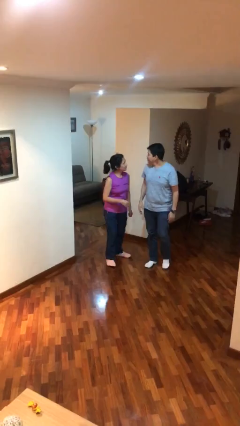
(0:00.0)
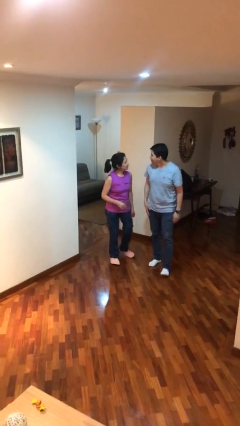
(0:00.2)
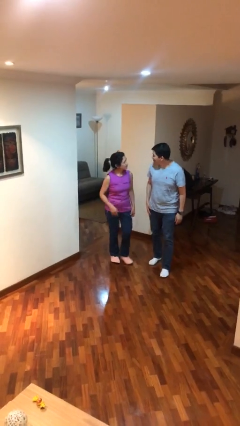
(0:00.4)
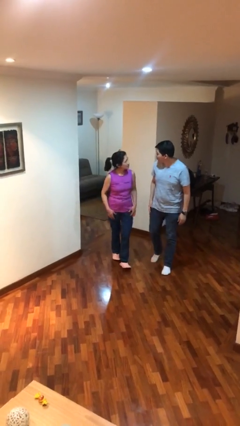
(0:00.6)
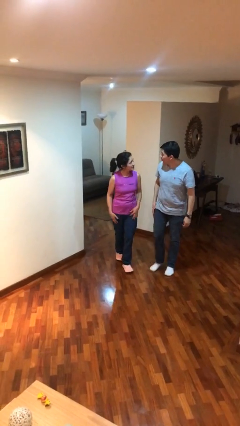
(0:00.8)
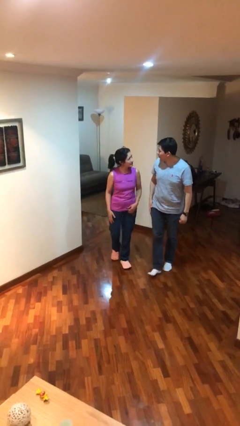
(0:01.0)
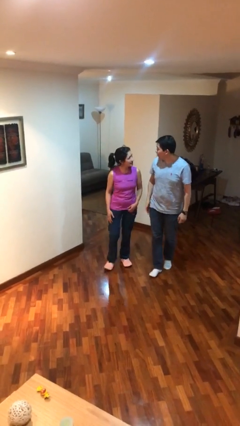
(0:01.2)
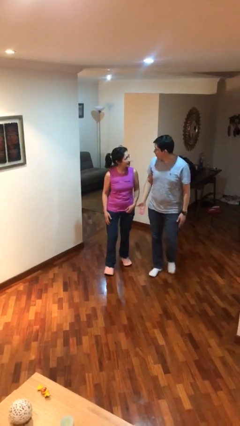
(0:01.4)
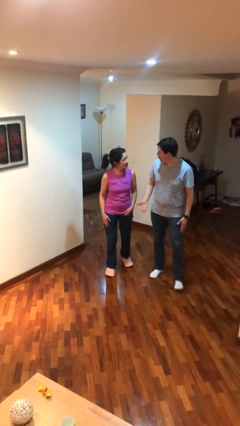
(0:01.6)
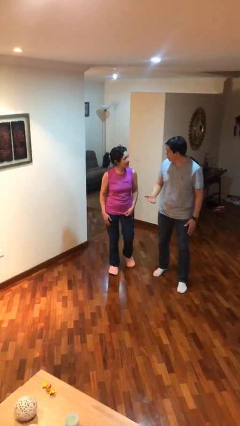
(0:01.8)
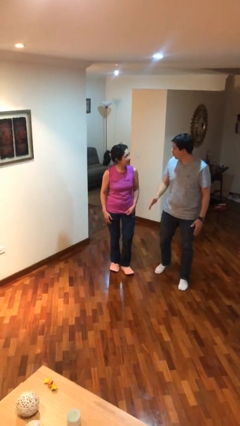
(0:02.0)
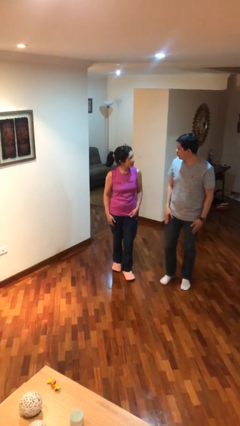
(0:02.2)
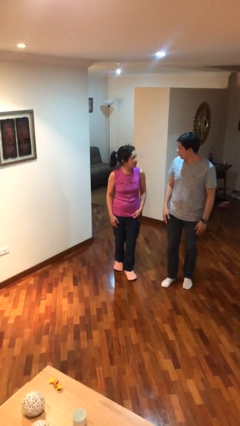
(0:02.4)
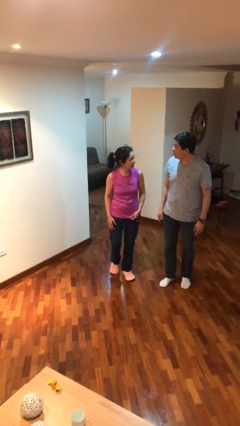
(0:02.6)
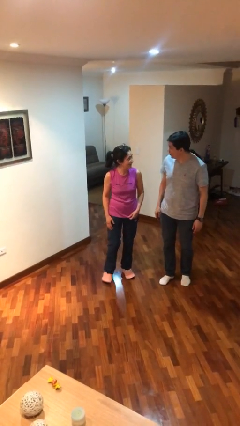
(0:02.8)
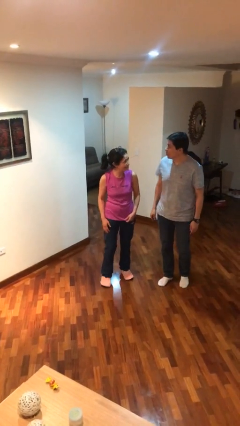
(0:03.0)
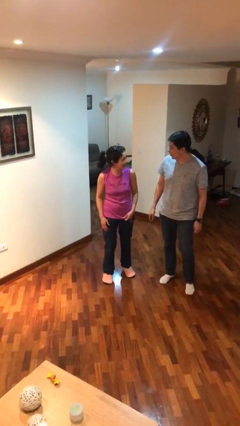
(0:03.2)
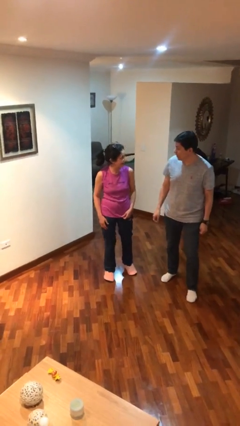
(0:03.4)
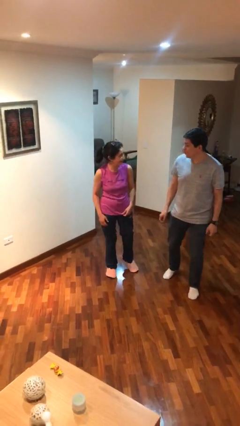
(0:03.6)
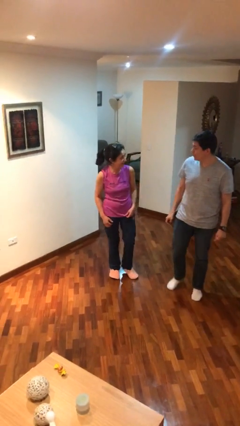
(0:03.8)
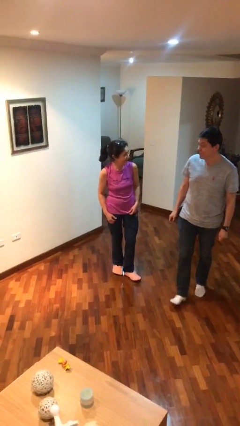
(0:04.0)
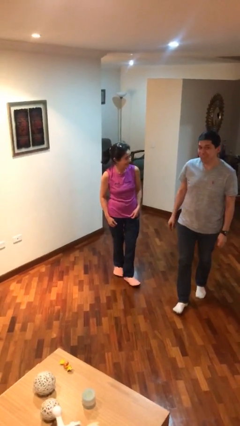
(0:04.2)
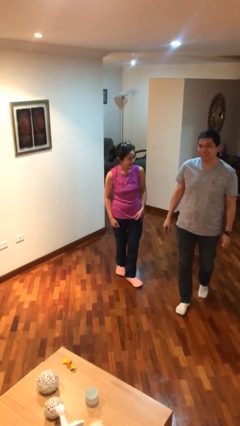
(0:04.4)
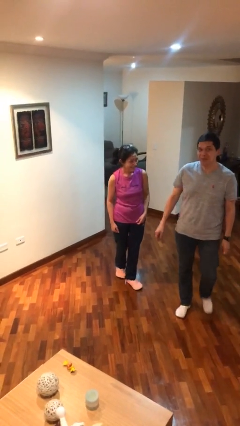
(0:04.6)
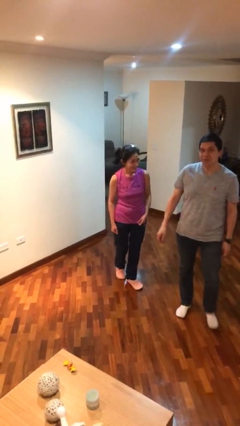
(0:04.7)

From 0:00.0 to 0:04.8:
person talks to person

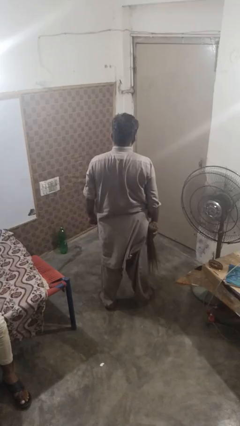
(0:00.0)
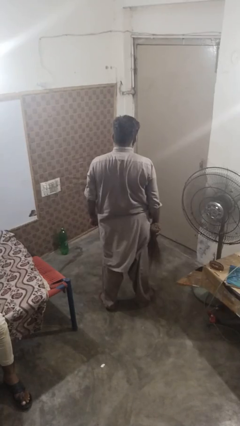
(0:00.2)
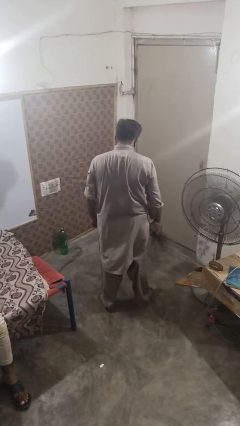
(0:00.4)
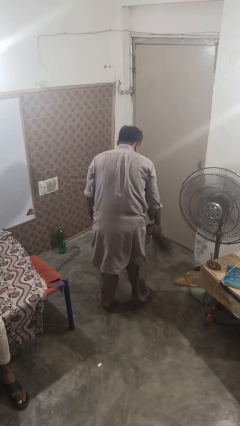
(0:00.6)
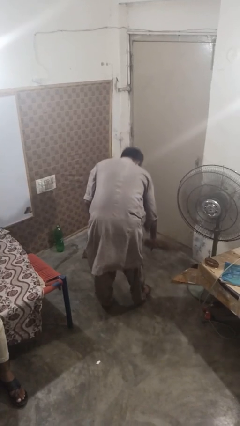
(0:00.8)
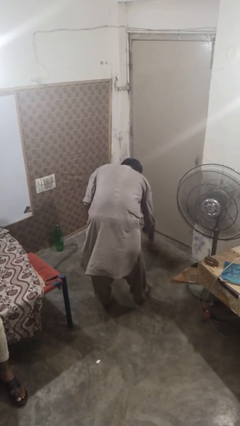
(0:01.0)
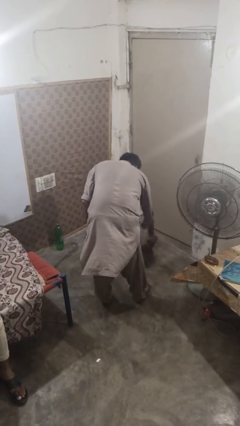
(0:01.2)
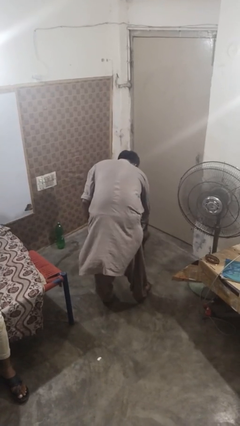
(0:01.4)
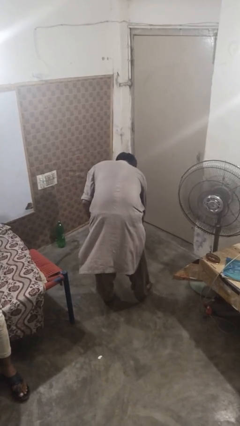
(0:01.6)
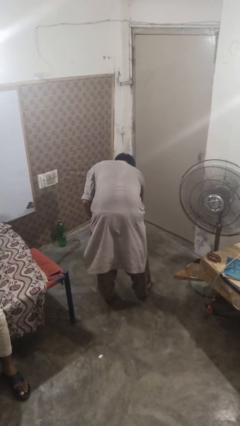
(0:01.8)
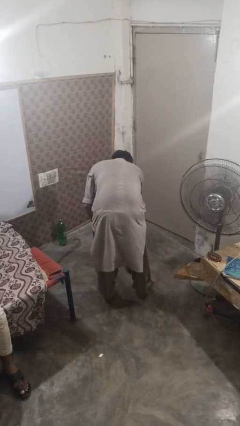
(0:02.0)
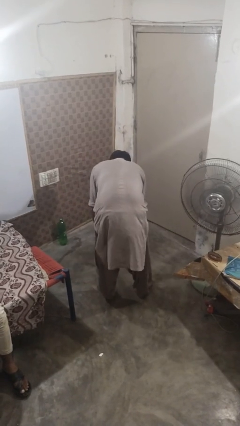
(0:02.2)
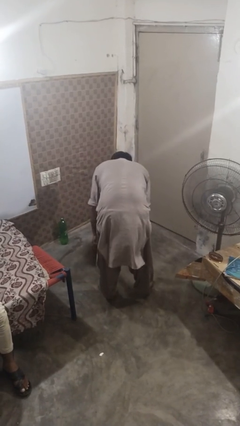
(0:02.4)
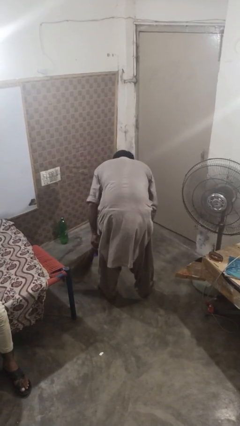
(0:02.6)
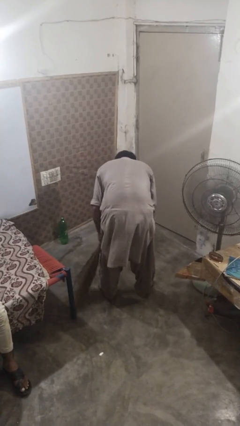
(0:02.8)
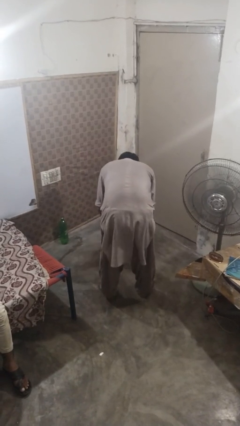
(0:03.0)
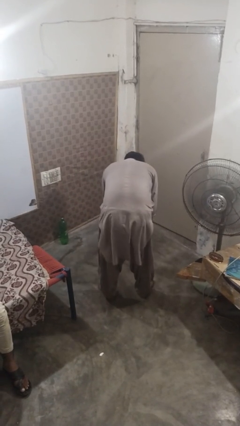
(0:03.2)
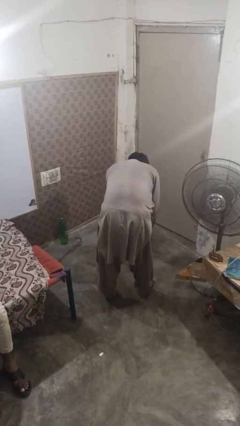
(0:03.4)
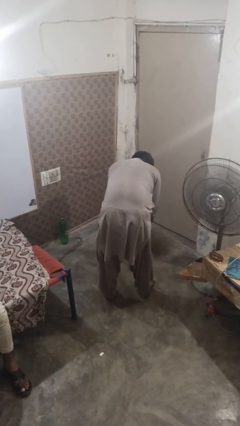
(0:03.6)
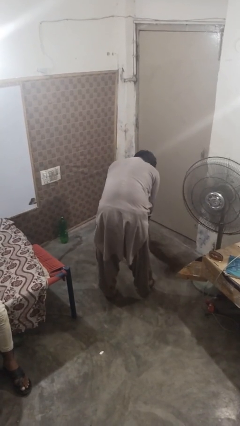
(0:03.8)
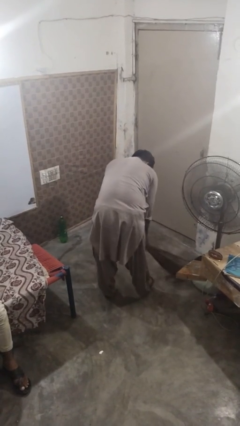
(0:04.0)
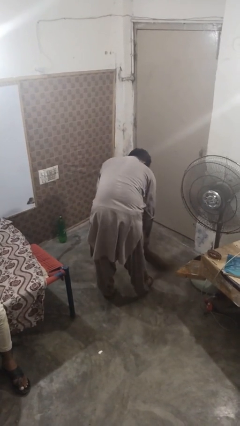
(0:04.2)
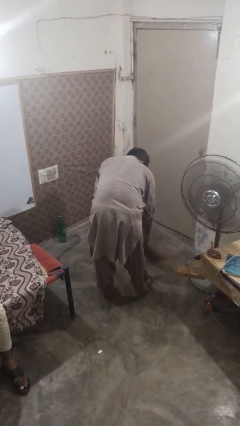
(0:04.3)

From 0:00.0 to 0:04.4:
person sweeps floor

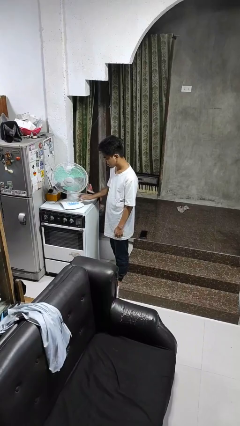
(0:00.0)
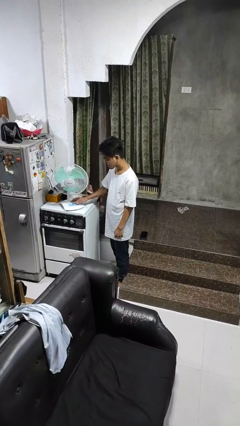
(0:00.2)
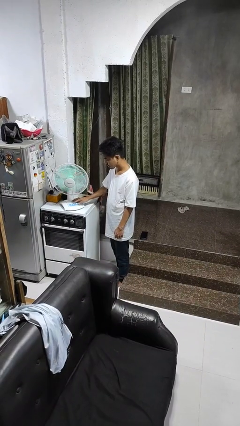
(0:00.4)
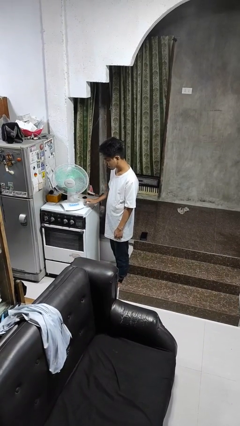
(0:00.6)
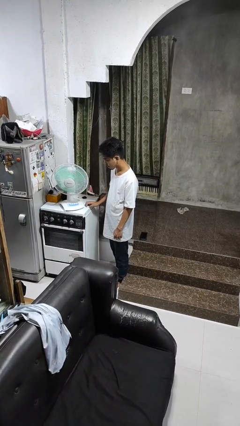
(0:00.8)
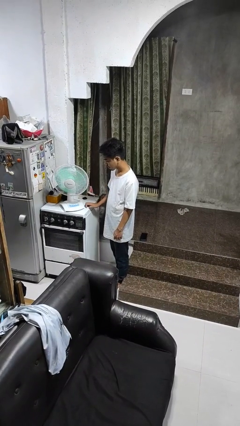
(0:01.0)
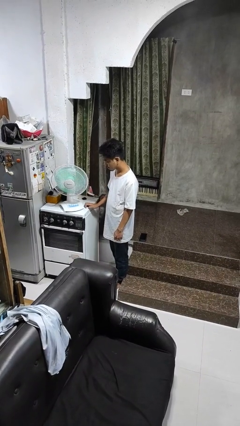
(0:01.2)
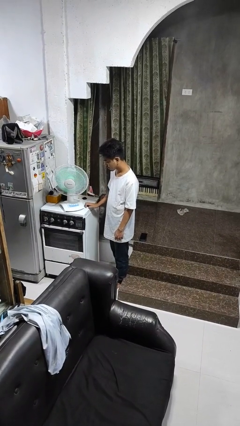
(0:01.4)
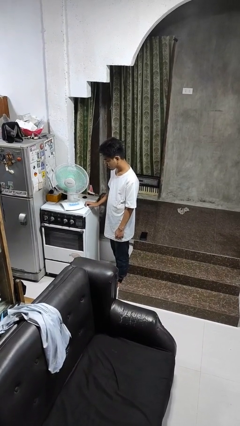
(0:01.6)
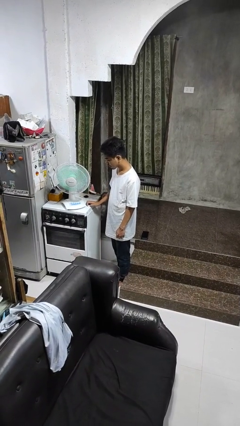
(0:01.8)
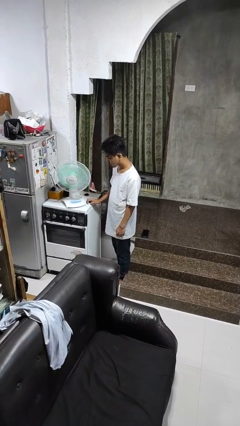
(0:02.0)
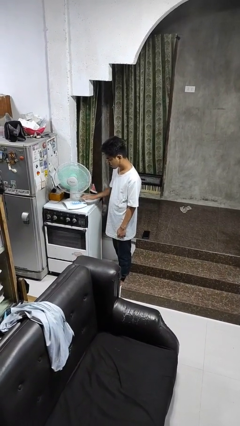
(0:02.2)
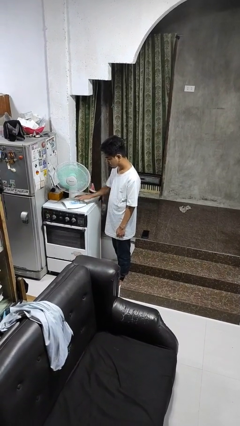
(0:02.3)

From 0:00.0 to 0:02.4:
person turns on fan

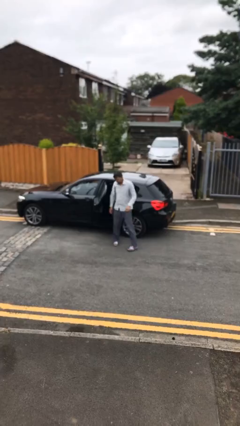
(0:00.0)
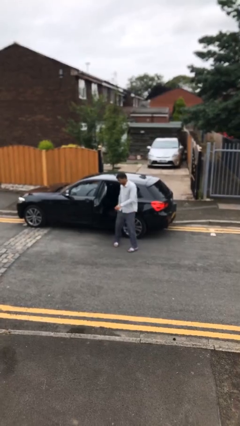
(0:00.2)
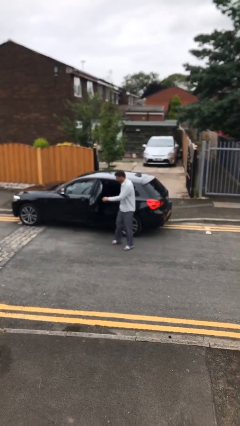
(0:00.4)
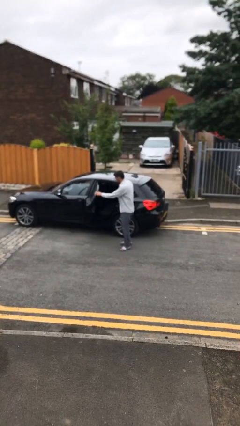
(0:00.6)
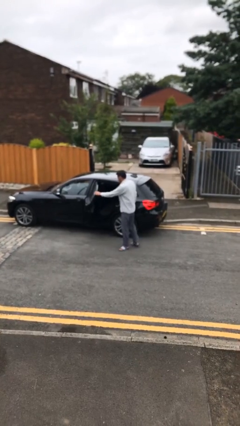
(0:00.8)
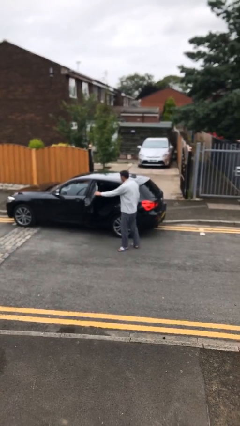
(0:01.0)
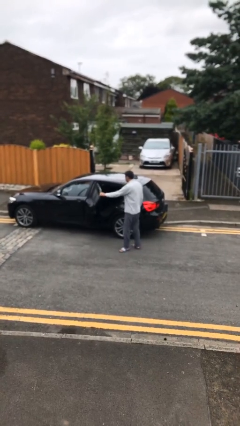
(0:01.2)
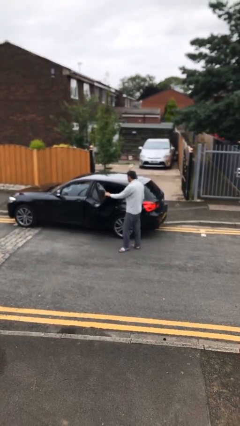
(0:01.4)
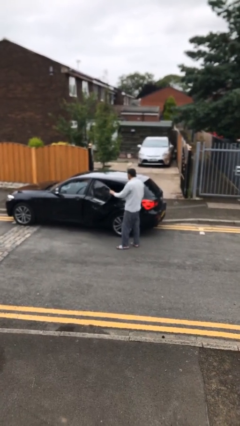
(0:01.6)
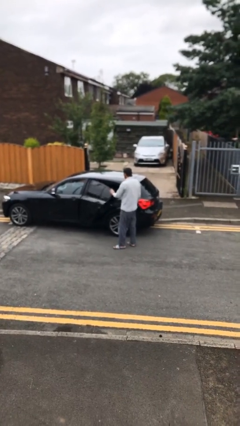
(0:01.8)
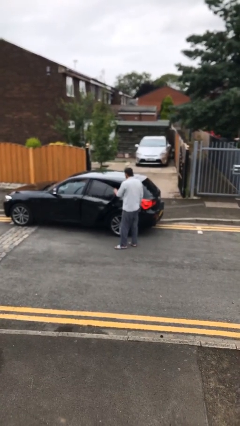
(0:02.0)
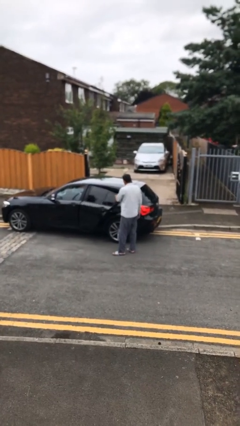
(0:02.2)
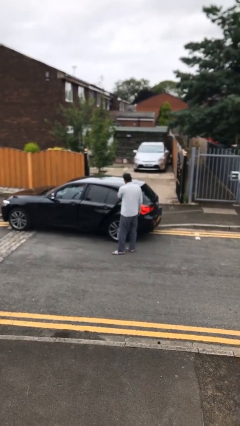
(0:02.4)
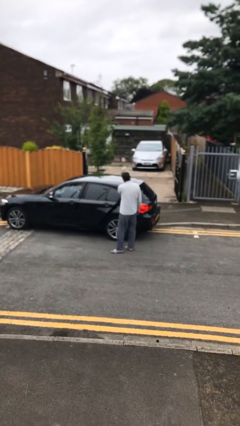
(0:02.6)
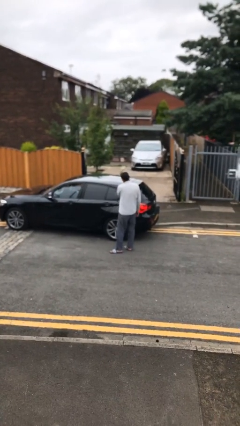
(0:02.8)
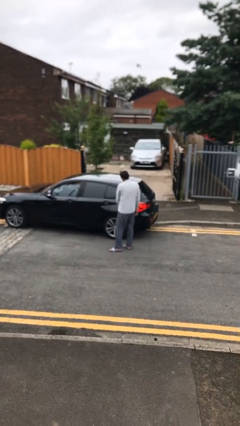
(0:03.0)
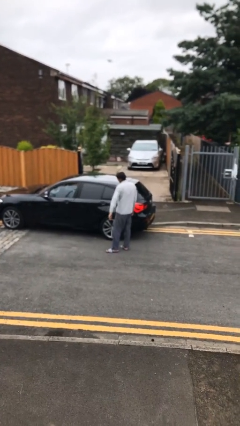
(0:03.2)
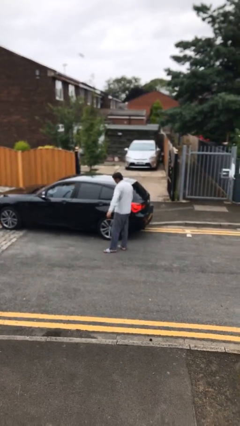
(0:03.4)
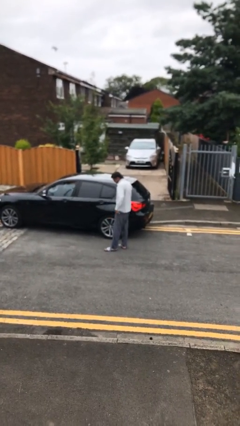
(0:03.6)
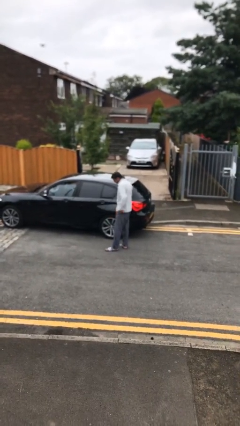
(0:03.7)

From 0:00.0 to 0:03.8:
person closes car door

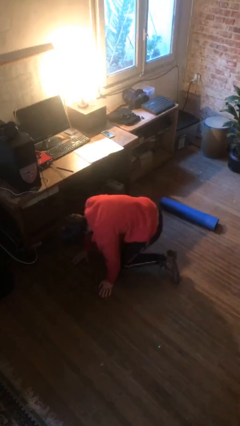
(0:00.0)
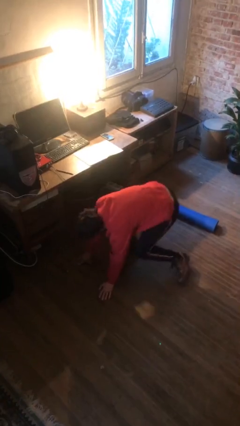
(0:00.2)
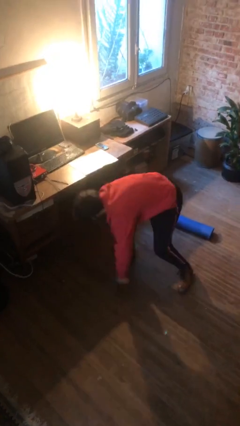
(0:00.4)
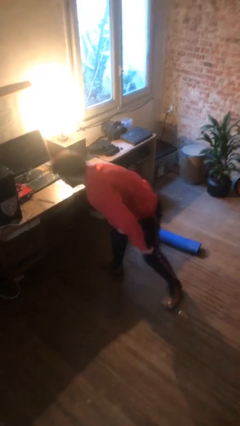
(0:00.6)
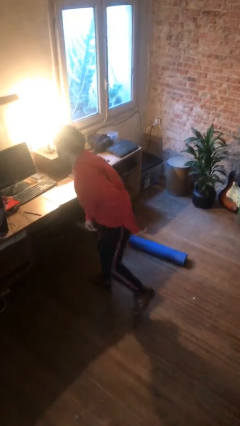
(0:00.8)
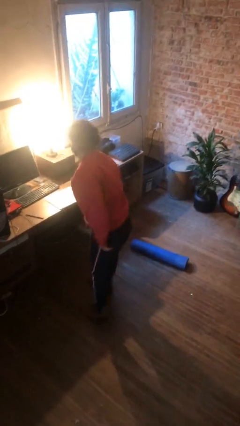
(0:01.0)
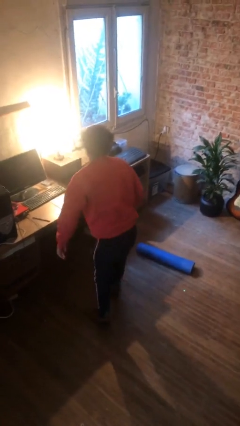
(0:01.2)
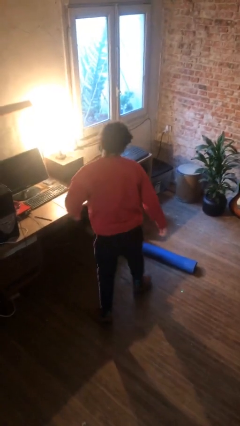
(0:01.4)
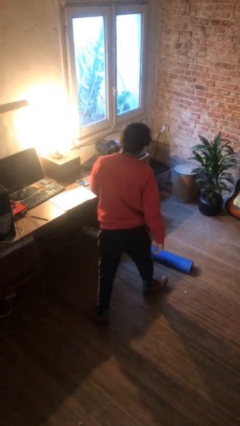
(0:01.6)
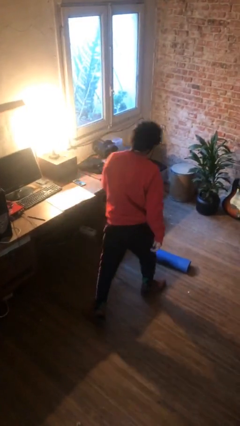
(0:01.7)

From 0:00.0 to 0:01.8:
person stands up from floor

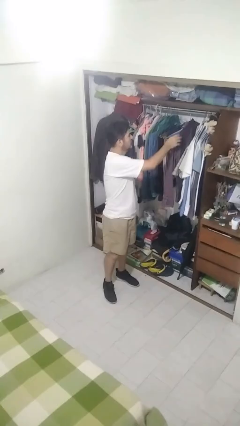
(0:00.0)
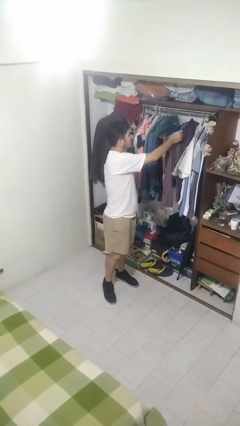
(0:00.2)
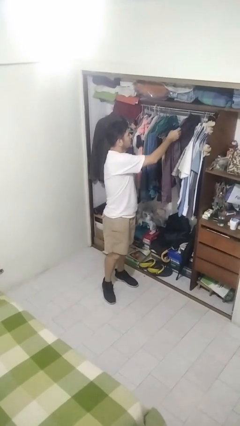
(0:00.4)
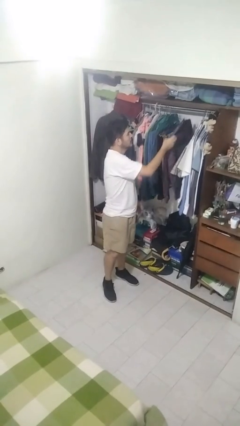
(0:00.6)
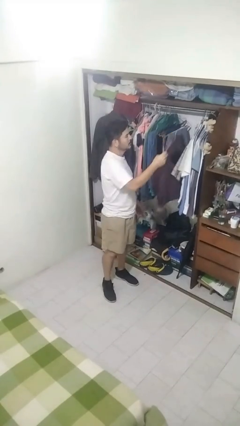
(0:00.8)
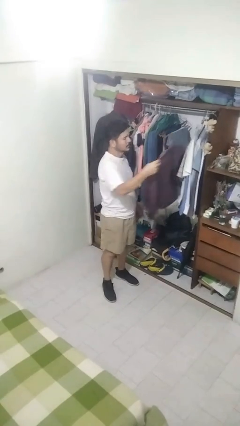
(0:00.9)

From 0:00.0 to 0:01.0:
person takes clothes from closet
